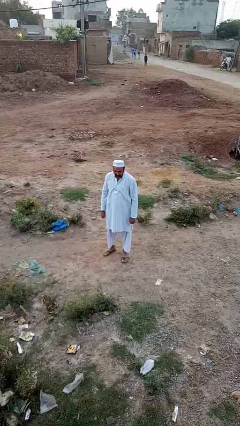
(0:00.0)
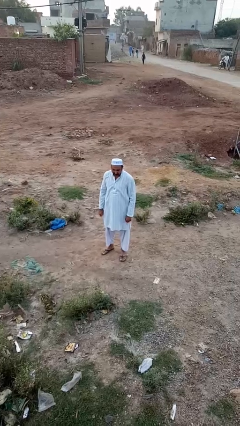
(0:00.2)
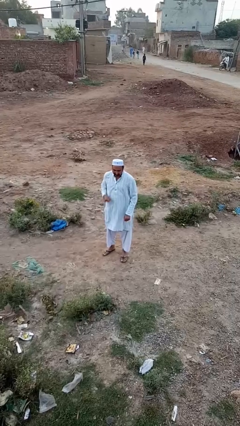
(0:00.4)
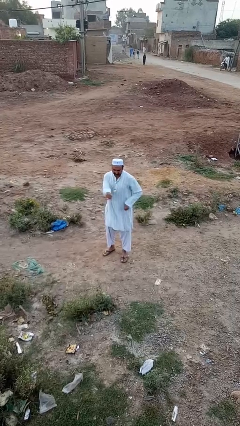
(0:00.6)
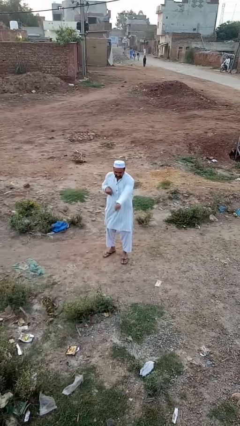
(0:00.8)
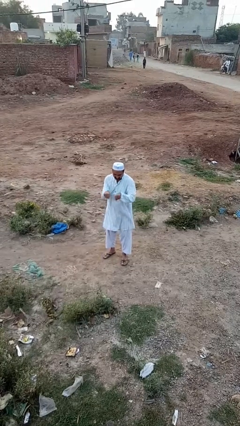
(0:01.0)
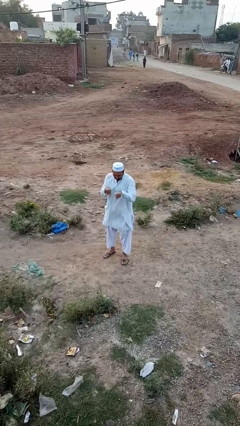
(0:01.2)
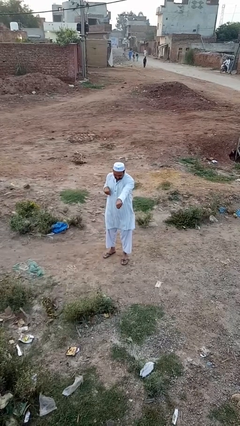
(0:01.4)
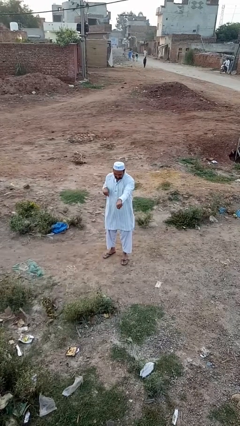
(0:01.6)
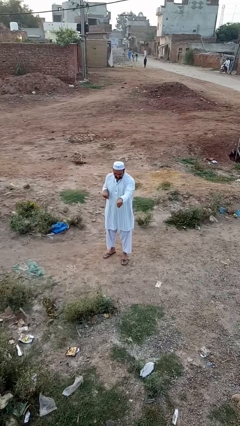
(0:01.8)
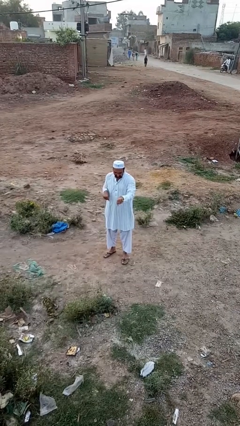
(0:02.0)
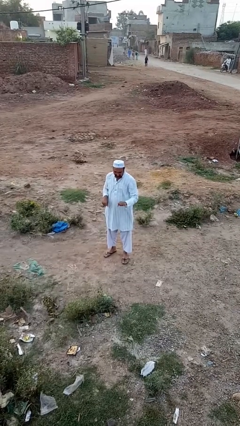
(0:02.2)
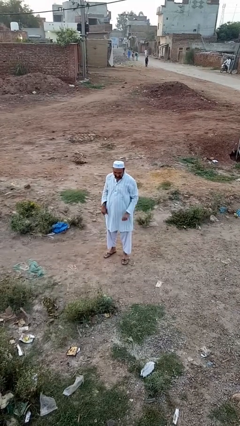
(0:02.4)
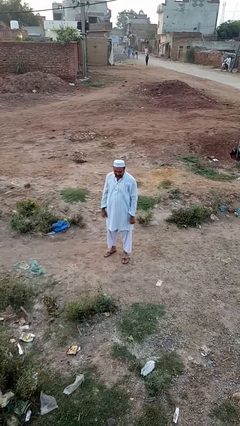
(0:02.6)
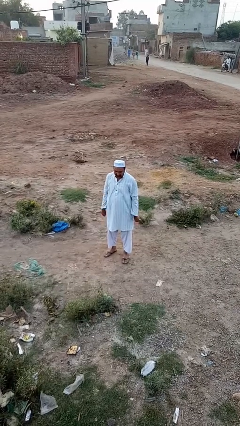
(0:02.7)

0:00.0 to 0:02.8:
person punches

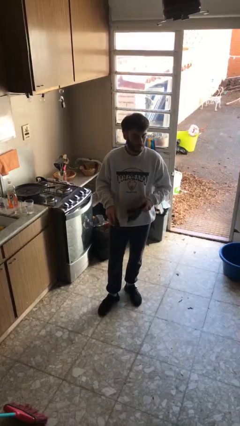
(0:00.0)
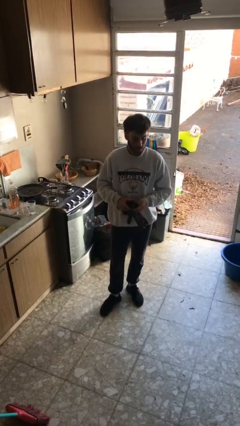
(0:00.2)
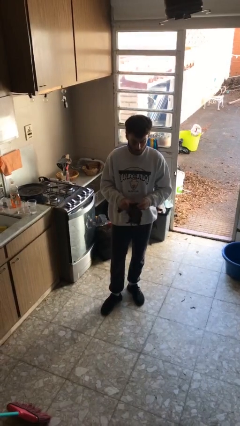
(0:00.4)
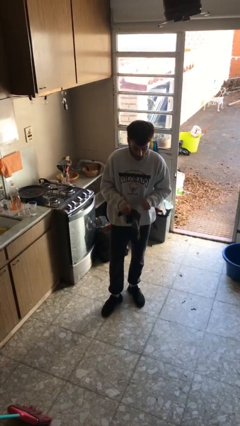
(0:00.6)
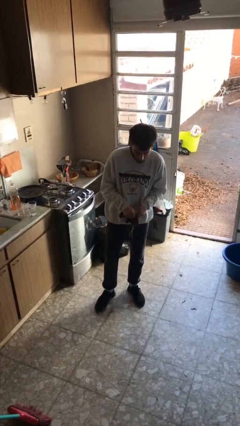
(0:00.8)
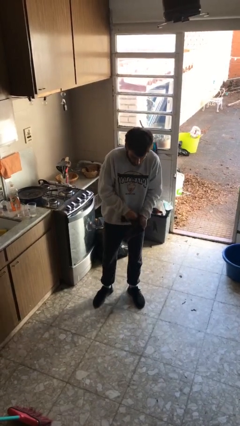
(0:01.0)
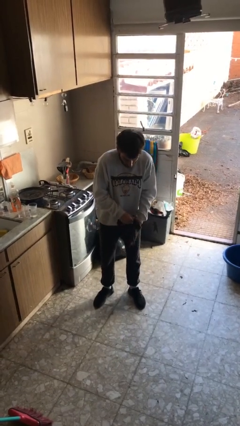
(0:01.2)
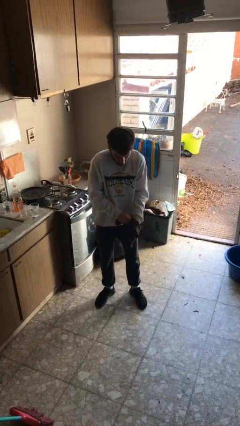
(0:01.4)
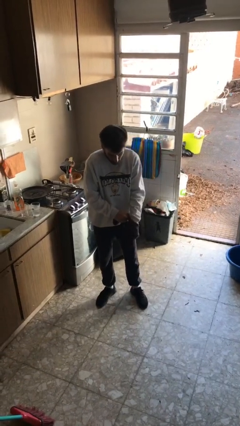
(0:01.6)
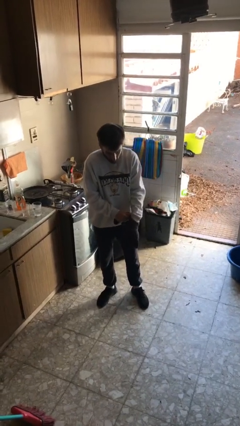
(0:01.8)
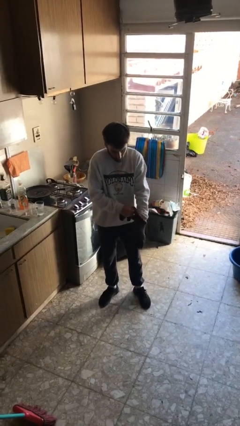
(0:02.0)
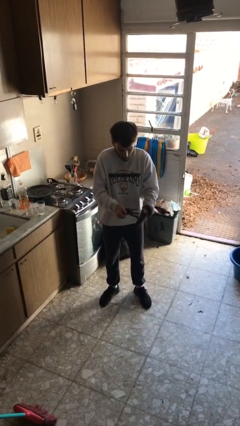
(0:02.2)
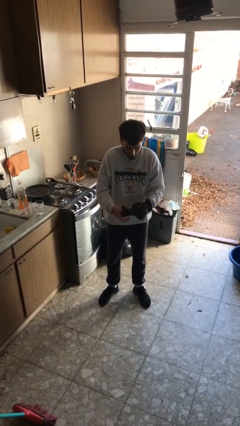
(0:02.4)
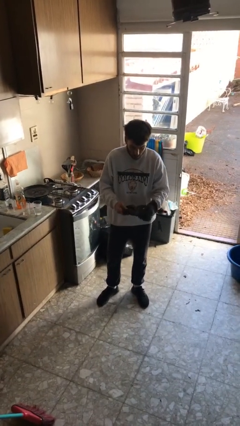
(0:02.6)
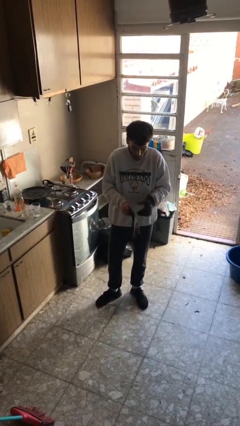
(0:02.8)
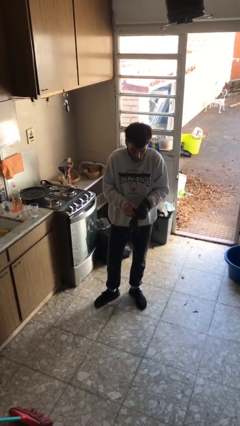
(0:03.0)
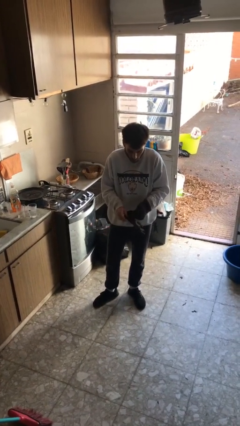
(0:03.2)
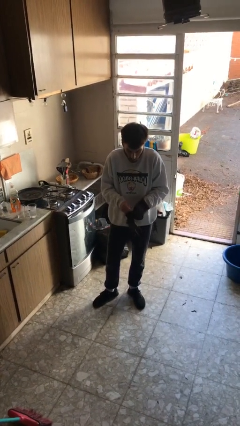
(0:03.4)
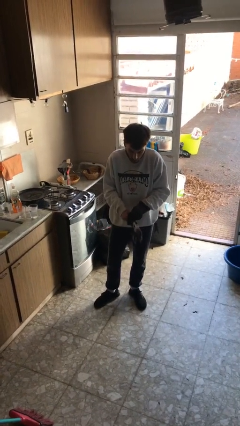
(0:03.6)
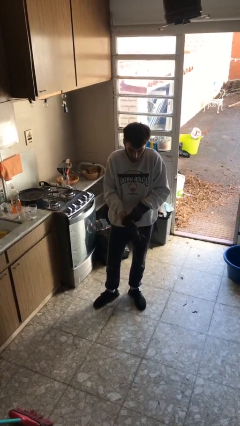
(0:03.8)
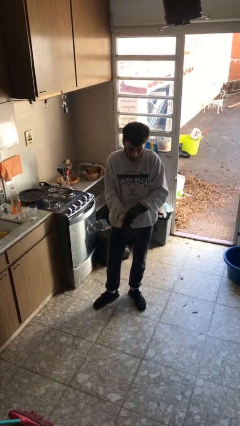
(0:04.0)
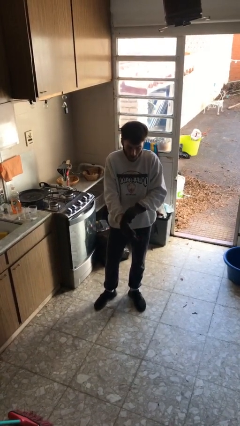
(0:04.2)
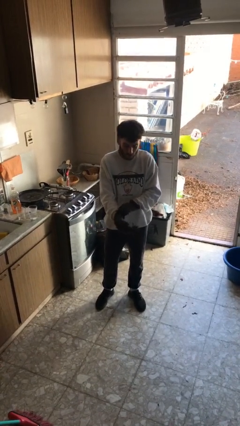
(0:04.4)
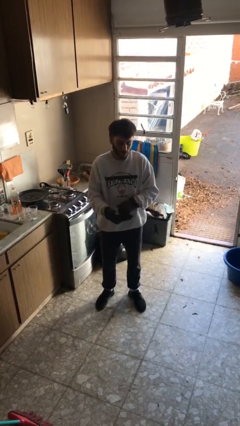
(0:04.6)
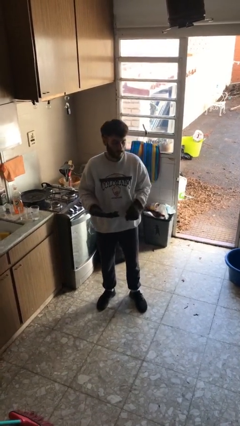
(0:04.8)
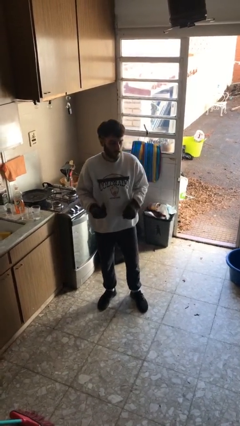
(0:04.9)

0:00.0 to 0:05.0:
person puts on gloves

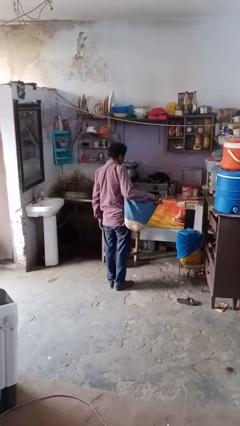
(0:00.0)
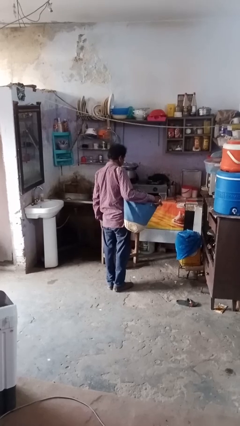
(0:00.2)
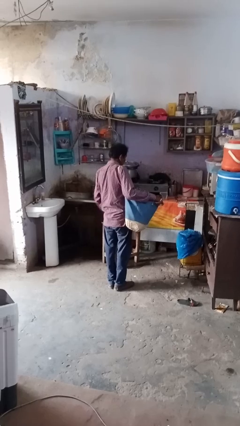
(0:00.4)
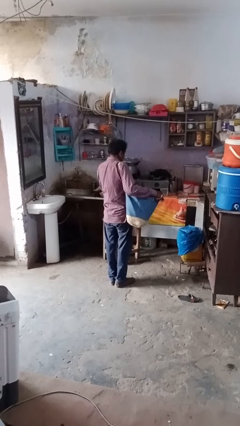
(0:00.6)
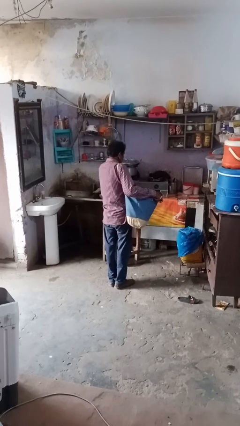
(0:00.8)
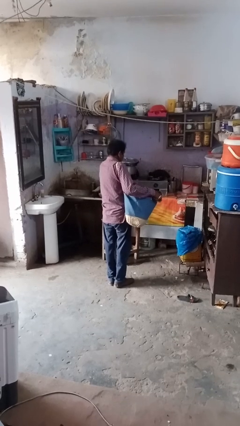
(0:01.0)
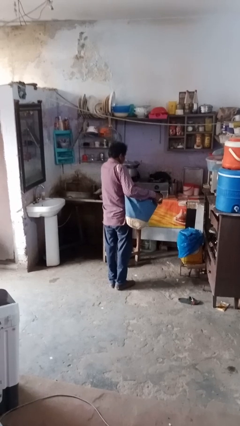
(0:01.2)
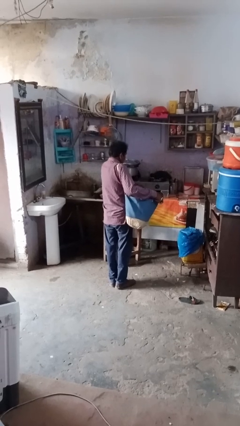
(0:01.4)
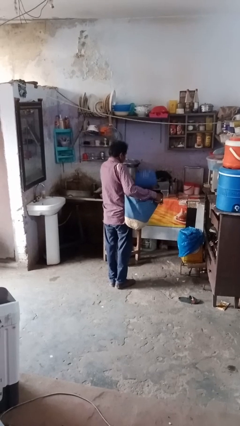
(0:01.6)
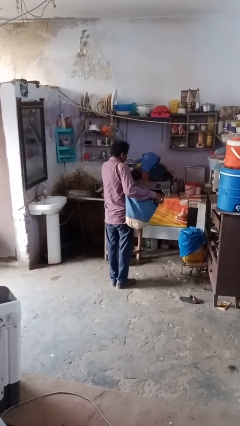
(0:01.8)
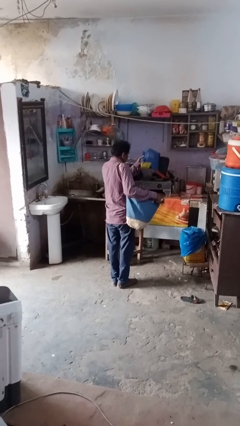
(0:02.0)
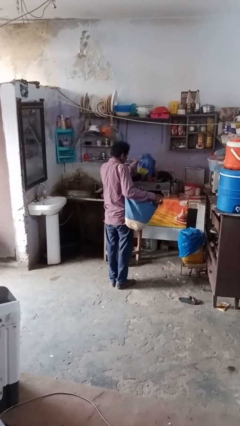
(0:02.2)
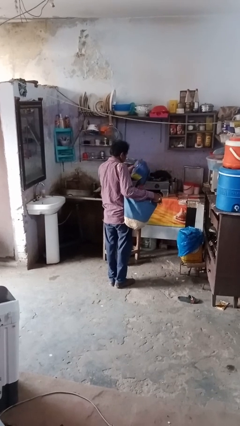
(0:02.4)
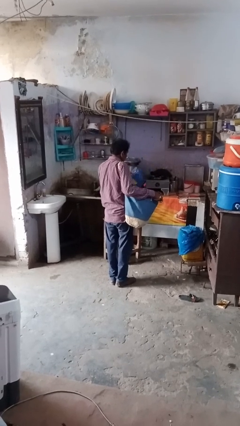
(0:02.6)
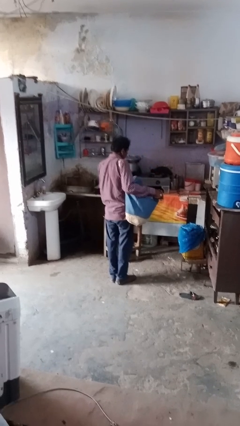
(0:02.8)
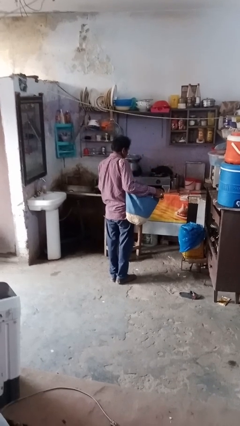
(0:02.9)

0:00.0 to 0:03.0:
person takes object from bag

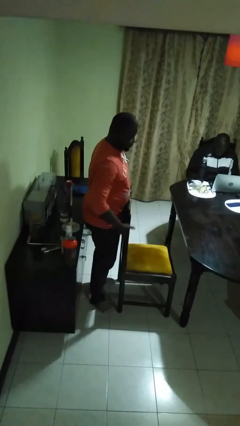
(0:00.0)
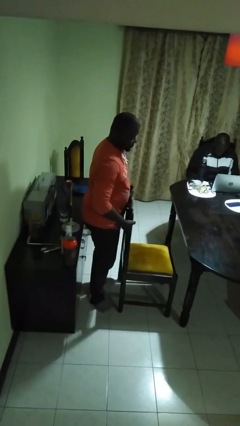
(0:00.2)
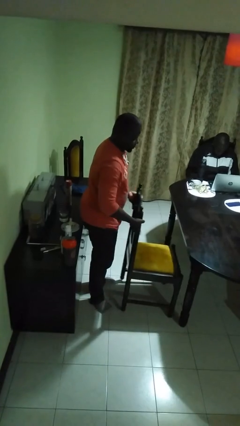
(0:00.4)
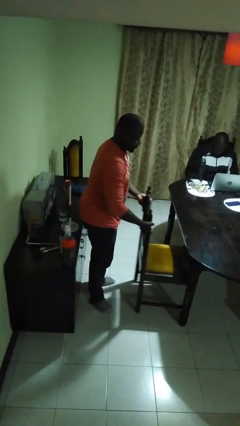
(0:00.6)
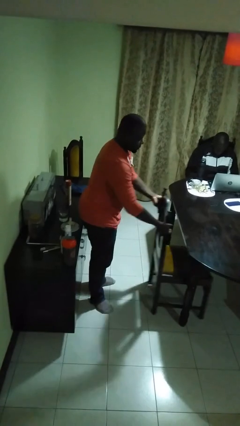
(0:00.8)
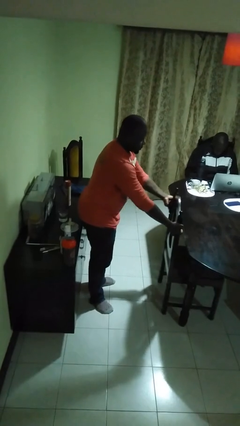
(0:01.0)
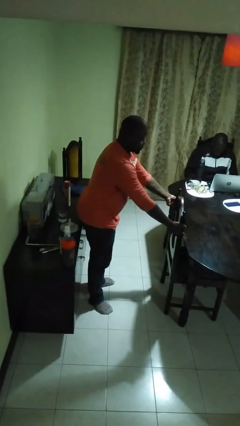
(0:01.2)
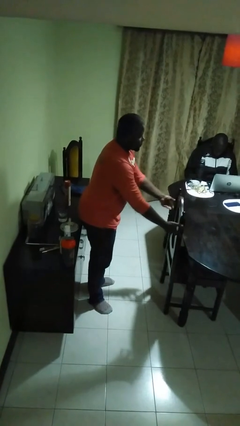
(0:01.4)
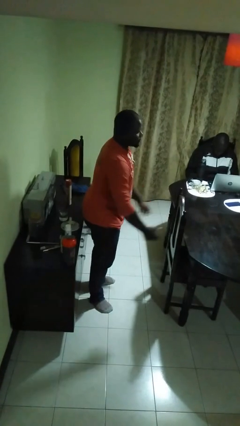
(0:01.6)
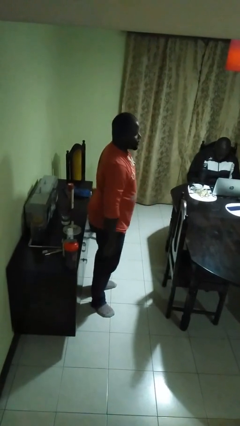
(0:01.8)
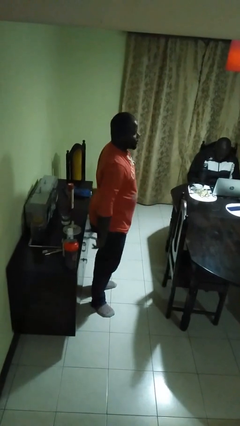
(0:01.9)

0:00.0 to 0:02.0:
person pushes in chair

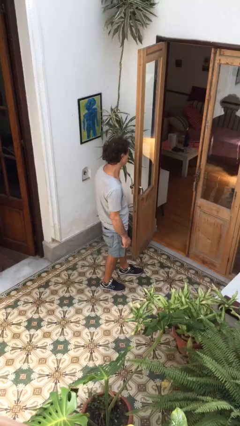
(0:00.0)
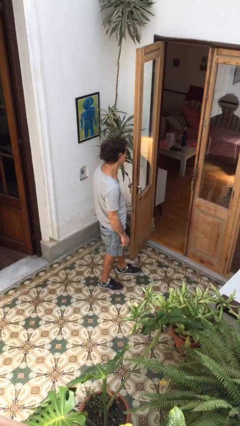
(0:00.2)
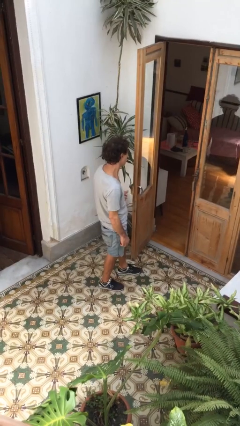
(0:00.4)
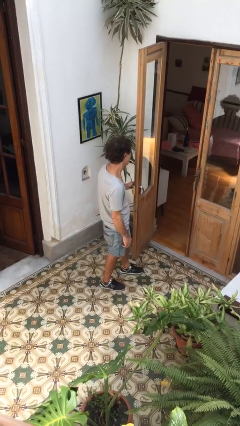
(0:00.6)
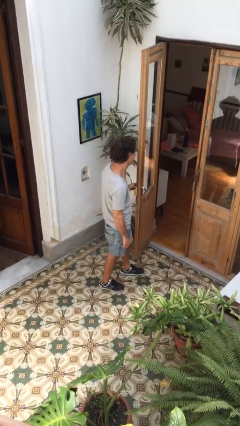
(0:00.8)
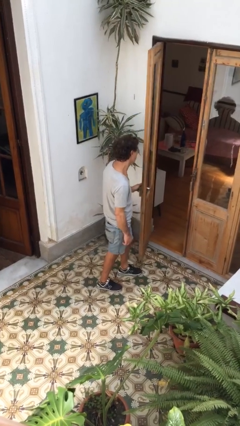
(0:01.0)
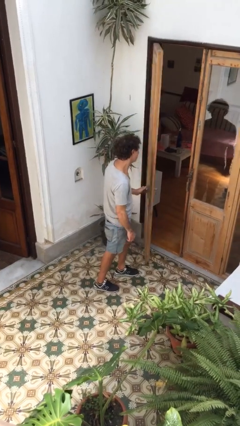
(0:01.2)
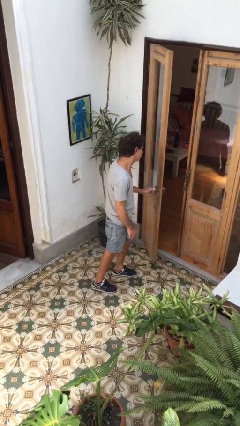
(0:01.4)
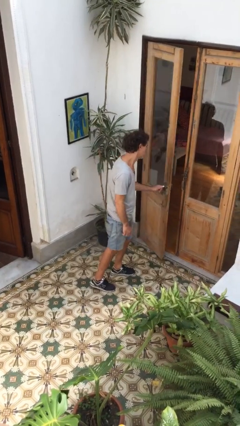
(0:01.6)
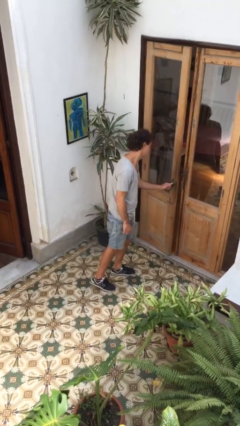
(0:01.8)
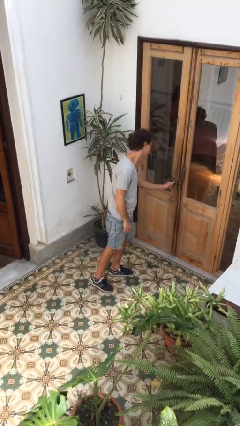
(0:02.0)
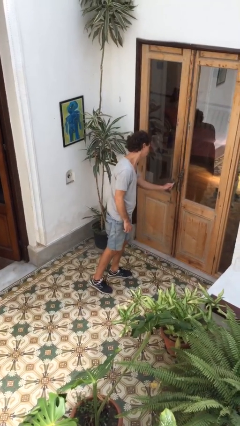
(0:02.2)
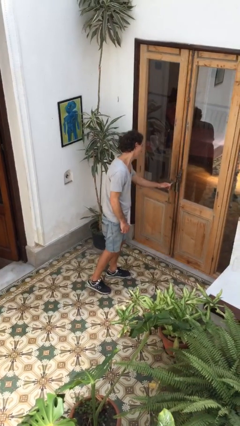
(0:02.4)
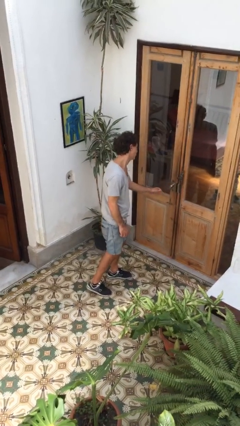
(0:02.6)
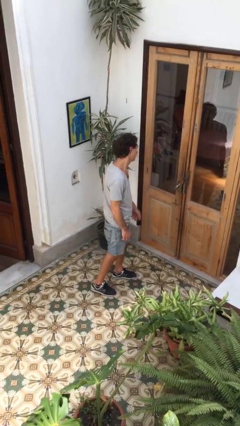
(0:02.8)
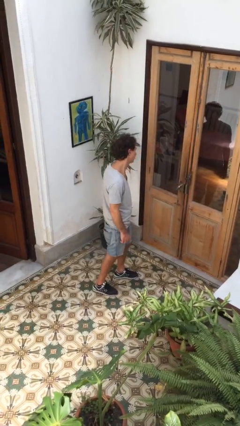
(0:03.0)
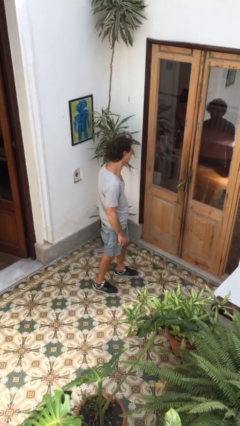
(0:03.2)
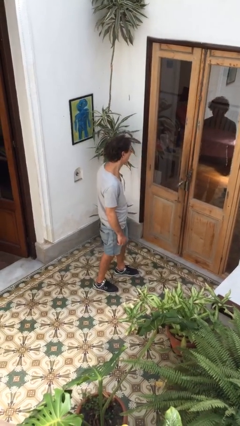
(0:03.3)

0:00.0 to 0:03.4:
person closes facility door

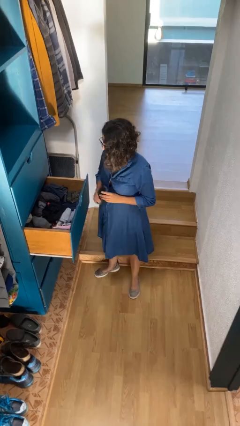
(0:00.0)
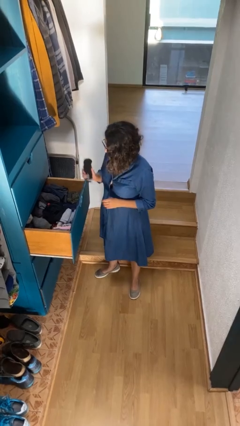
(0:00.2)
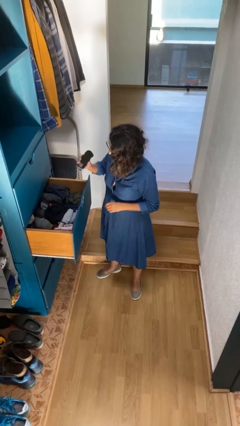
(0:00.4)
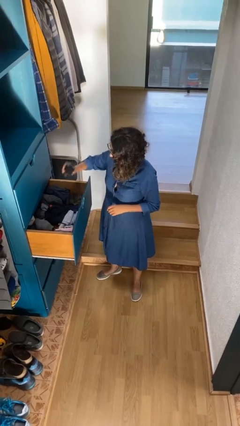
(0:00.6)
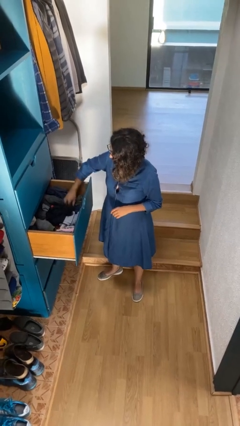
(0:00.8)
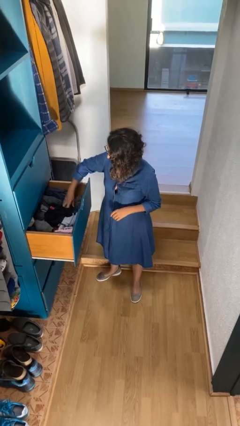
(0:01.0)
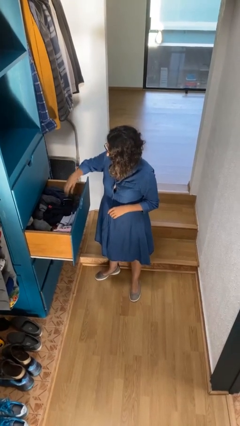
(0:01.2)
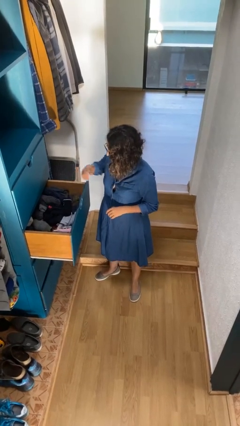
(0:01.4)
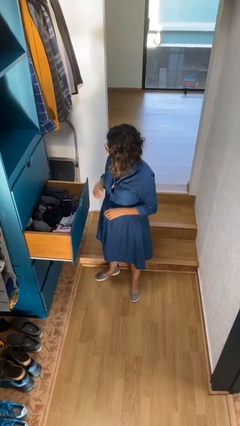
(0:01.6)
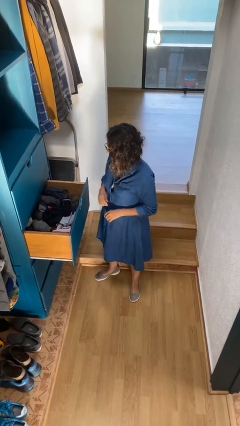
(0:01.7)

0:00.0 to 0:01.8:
person puts clothes into dresser
